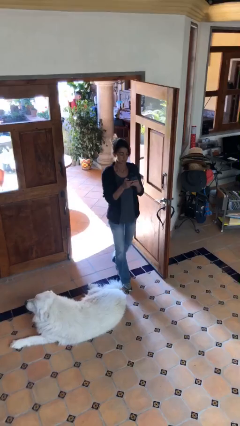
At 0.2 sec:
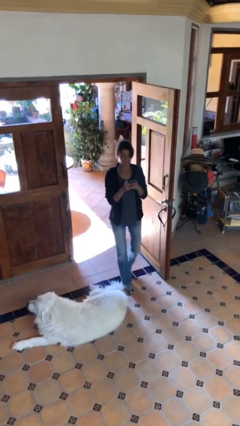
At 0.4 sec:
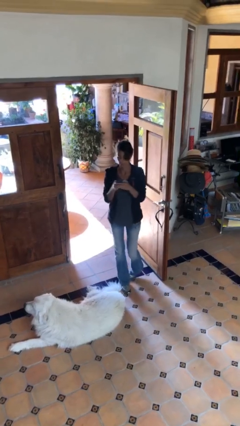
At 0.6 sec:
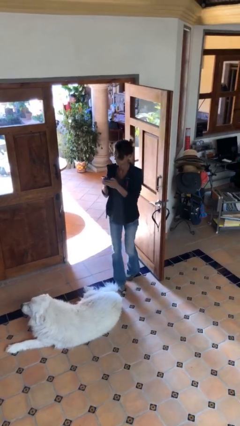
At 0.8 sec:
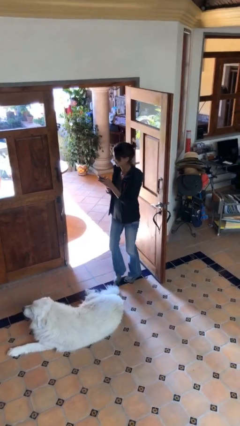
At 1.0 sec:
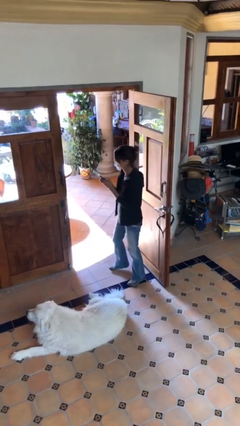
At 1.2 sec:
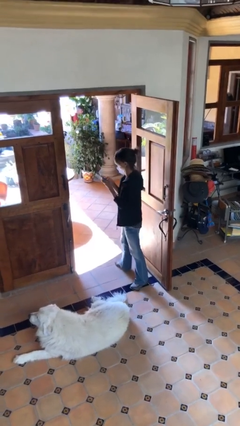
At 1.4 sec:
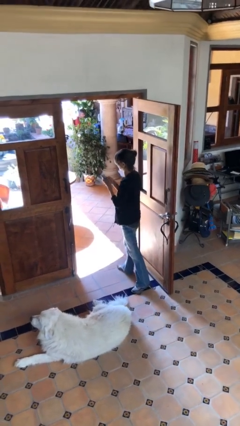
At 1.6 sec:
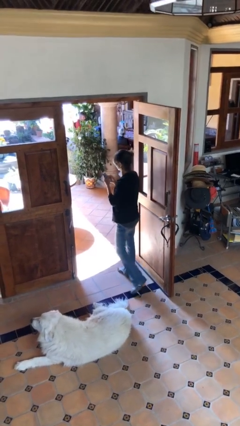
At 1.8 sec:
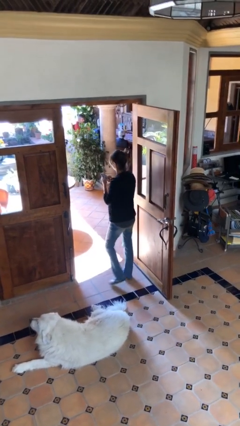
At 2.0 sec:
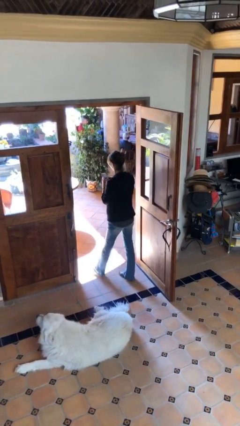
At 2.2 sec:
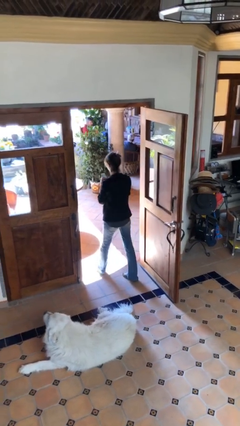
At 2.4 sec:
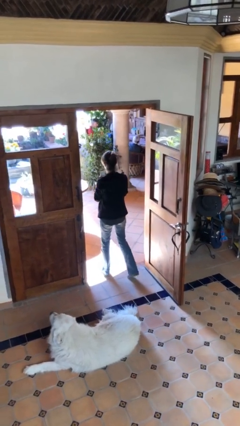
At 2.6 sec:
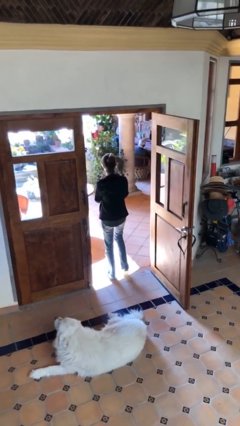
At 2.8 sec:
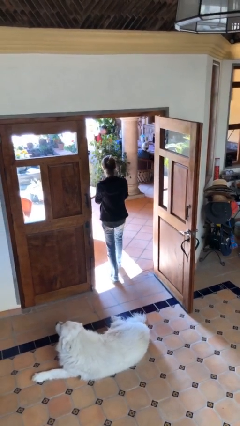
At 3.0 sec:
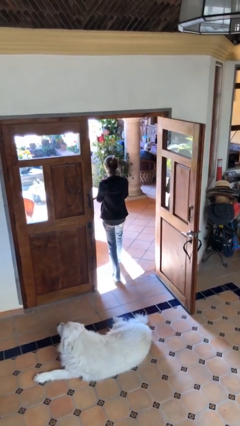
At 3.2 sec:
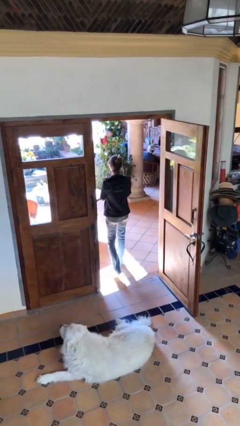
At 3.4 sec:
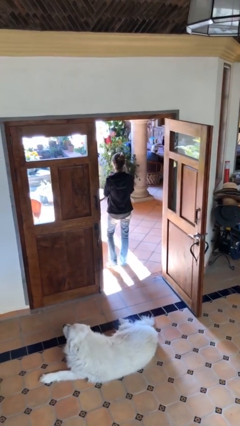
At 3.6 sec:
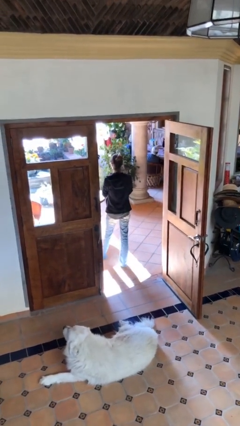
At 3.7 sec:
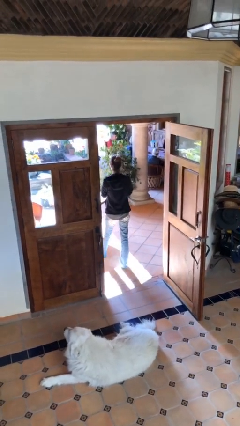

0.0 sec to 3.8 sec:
person exits scene through structure

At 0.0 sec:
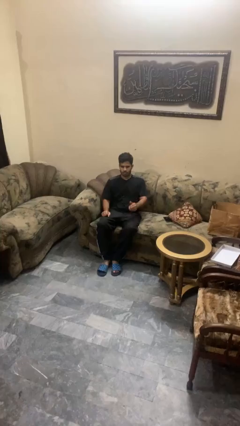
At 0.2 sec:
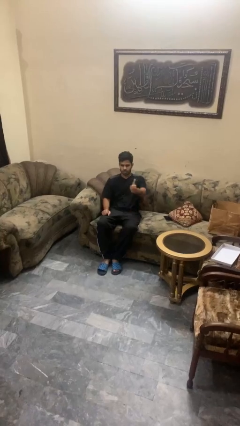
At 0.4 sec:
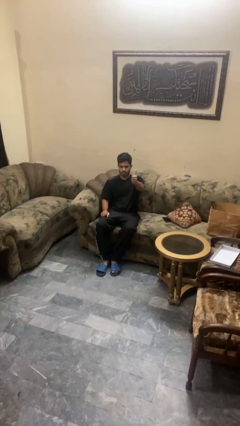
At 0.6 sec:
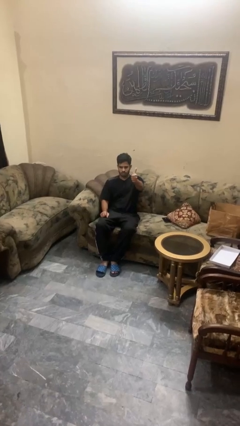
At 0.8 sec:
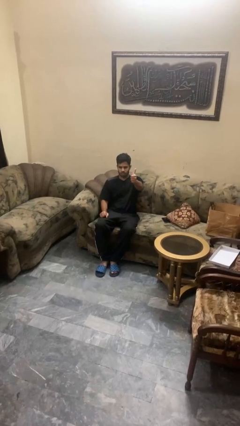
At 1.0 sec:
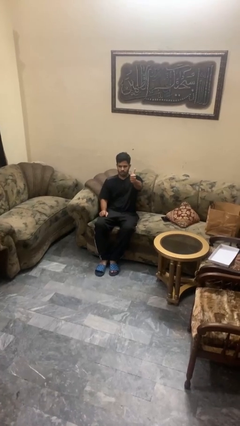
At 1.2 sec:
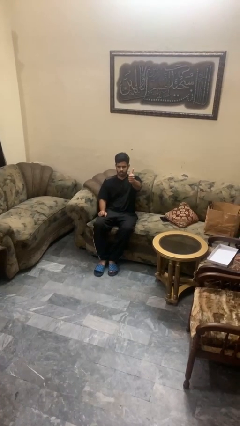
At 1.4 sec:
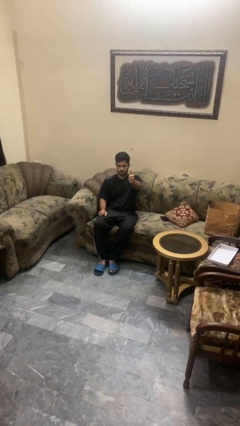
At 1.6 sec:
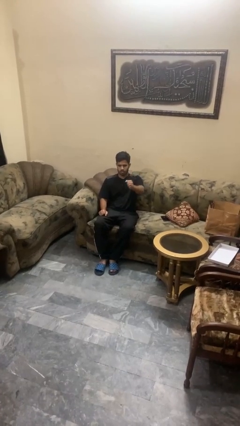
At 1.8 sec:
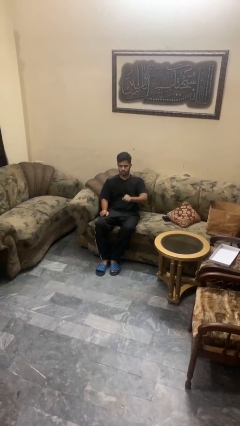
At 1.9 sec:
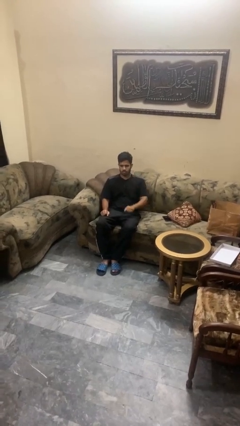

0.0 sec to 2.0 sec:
person gestures thumbs up

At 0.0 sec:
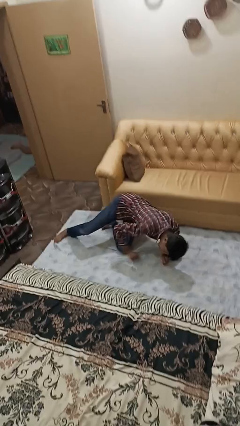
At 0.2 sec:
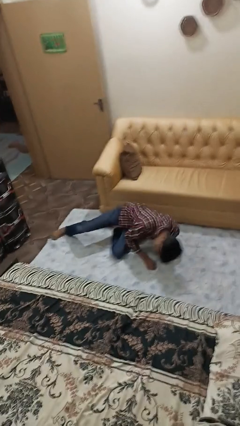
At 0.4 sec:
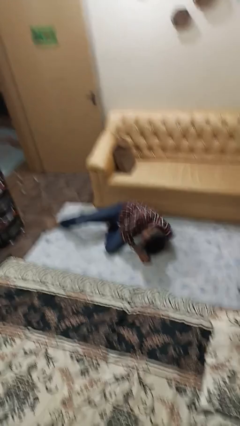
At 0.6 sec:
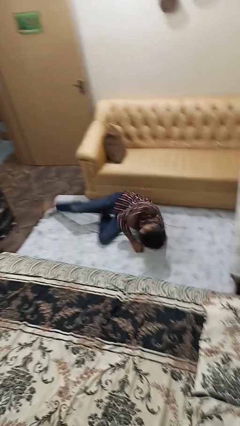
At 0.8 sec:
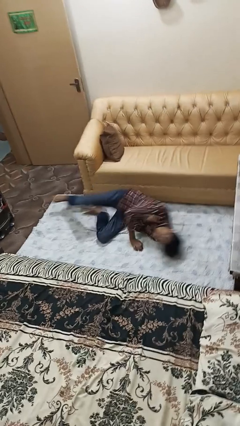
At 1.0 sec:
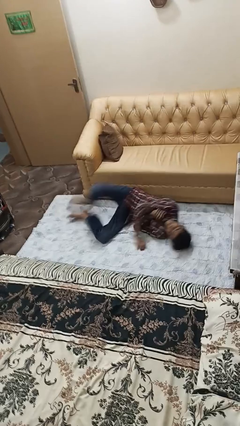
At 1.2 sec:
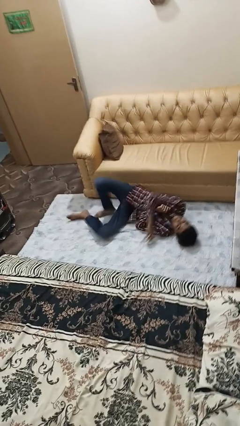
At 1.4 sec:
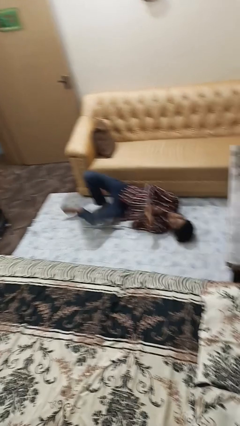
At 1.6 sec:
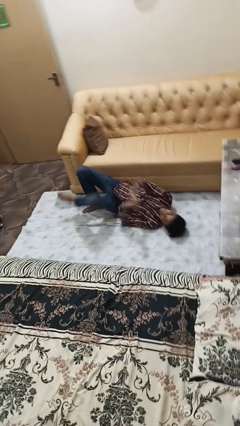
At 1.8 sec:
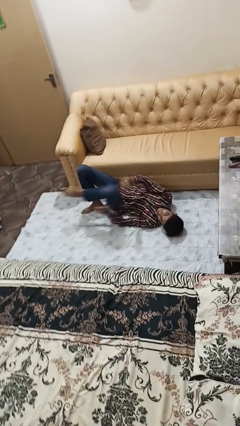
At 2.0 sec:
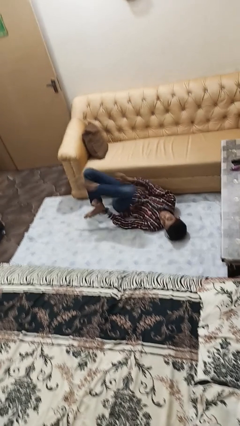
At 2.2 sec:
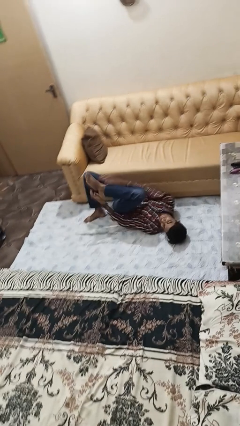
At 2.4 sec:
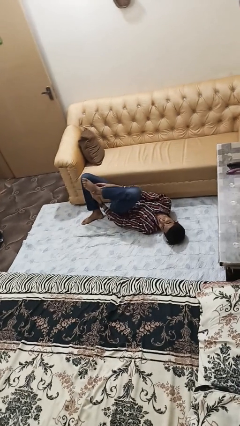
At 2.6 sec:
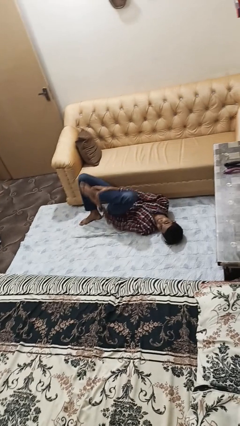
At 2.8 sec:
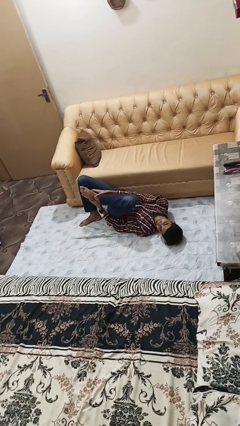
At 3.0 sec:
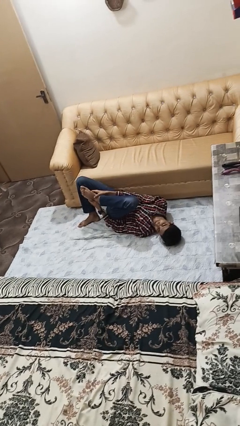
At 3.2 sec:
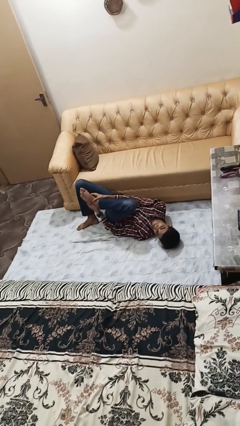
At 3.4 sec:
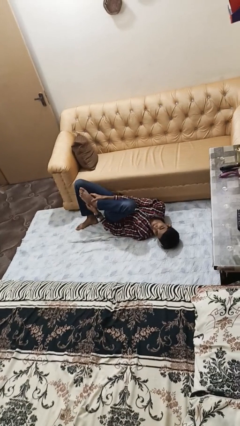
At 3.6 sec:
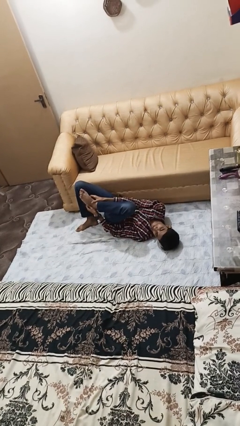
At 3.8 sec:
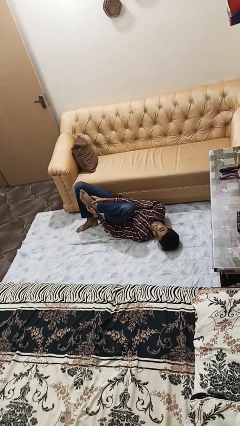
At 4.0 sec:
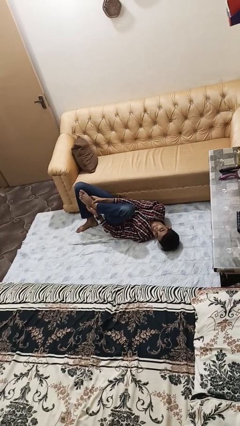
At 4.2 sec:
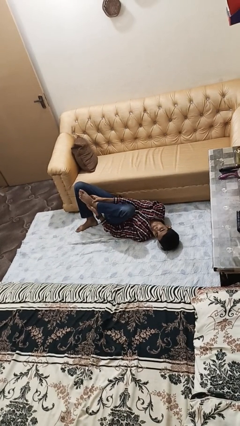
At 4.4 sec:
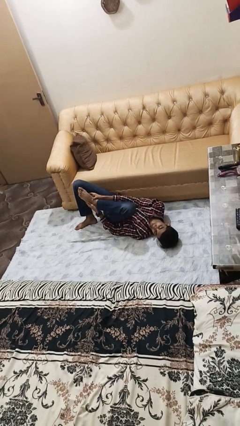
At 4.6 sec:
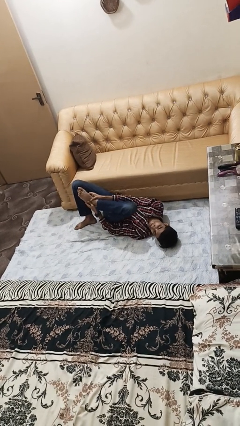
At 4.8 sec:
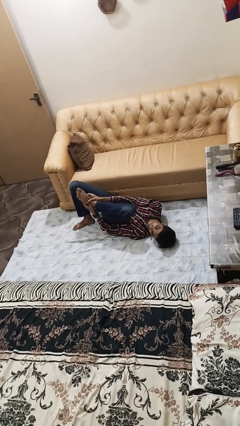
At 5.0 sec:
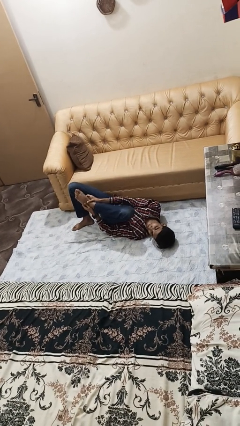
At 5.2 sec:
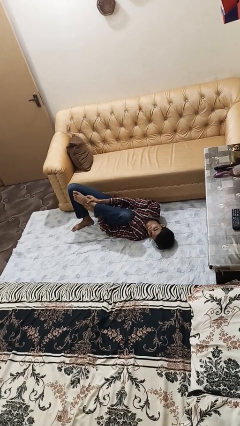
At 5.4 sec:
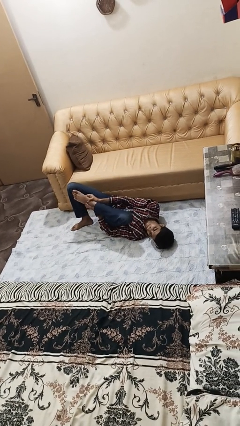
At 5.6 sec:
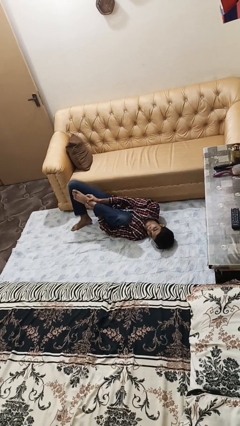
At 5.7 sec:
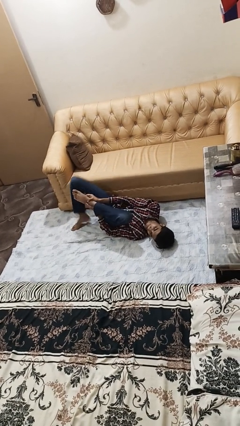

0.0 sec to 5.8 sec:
person lies down on floor

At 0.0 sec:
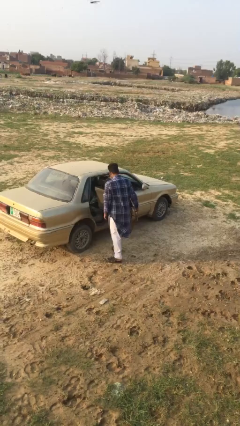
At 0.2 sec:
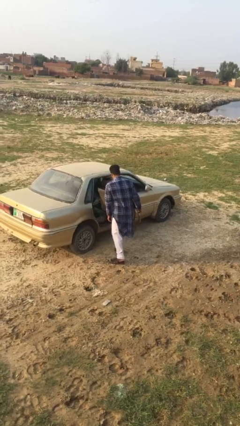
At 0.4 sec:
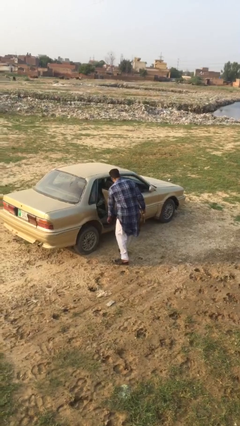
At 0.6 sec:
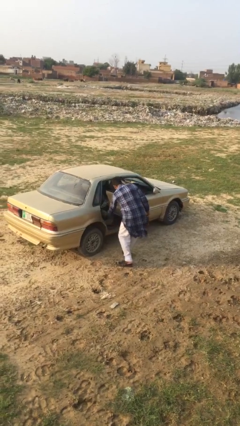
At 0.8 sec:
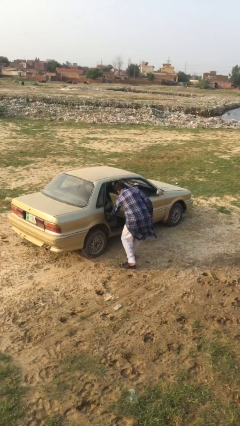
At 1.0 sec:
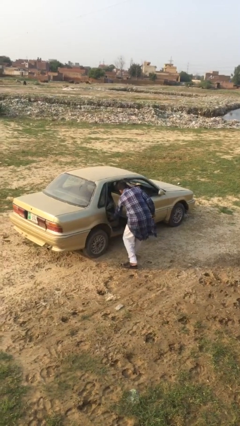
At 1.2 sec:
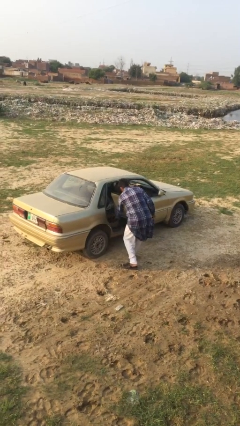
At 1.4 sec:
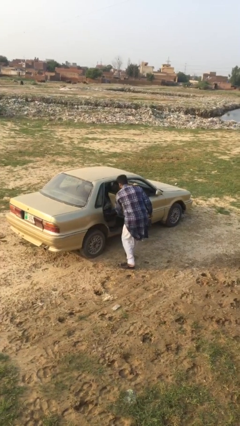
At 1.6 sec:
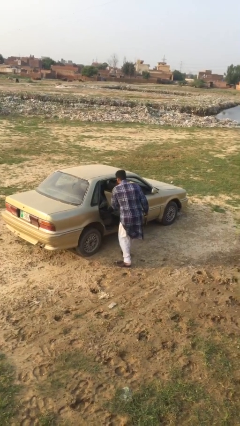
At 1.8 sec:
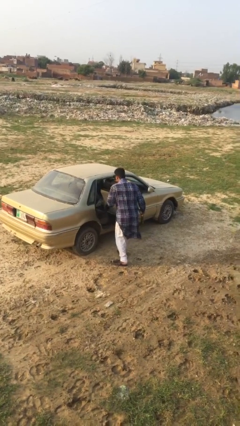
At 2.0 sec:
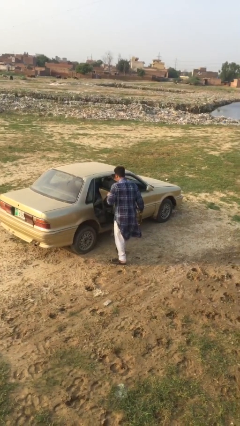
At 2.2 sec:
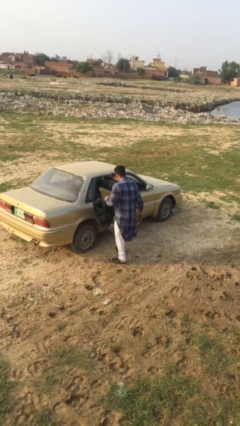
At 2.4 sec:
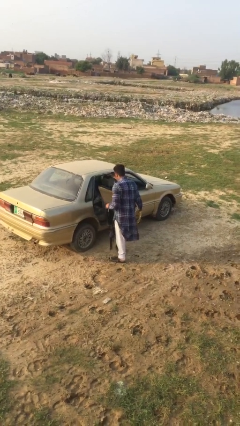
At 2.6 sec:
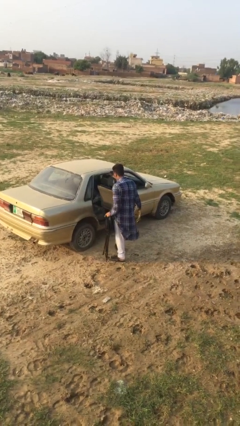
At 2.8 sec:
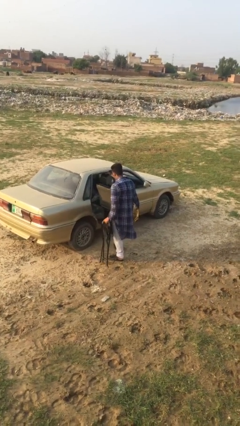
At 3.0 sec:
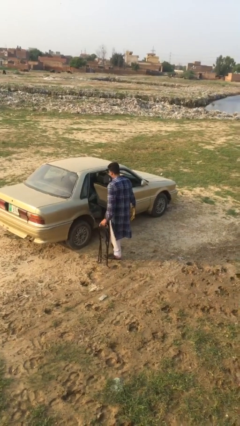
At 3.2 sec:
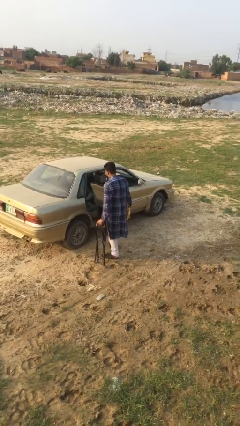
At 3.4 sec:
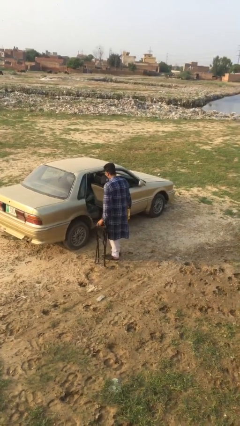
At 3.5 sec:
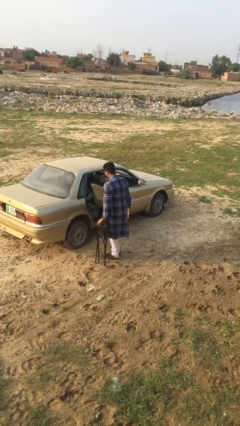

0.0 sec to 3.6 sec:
person unloads car

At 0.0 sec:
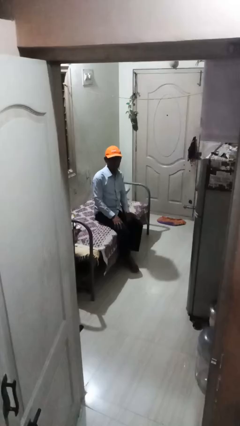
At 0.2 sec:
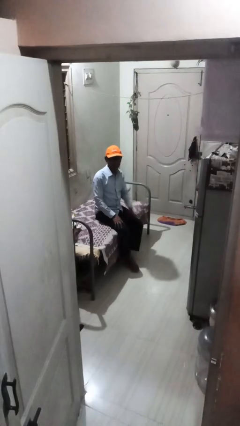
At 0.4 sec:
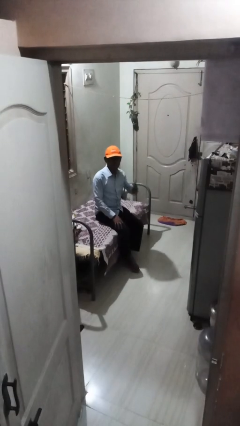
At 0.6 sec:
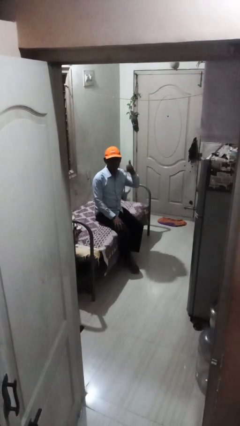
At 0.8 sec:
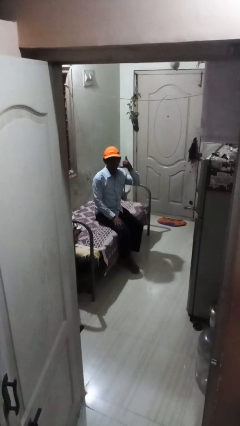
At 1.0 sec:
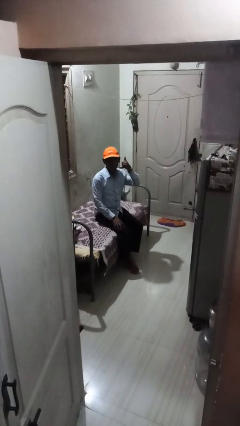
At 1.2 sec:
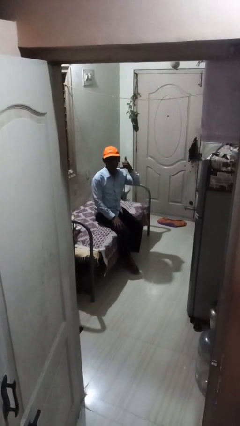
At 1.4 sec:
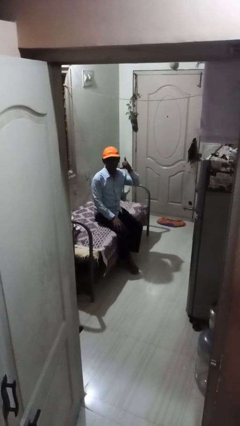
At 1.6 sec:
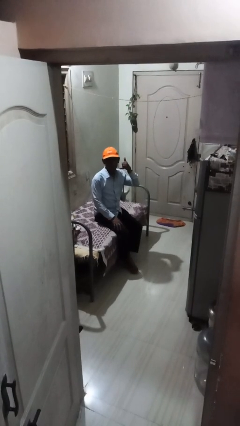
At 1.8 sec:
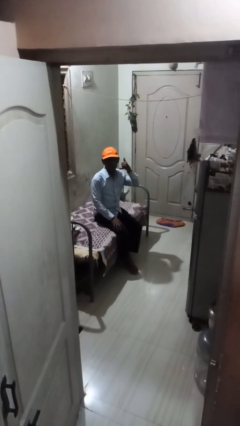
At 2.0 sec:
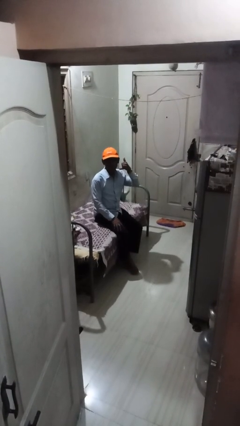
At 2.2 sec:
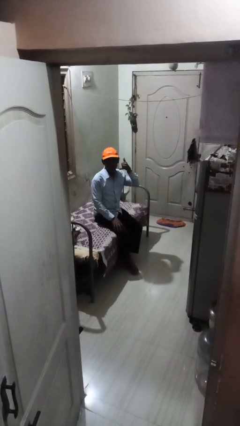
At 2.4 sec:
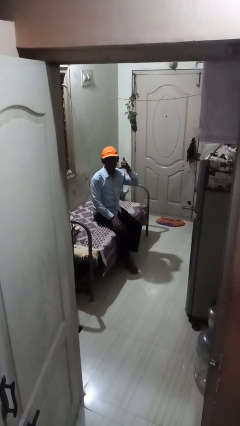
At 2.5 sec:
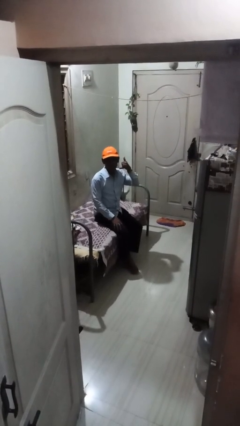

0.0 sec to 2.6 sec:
person gestures call me
